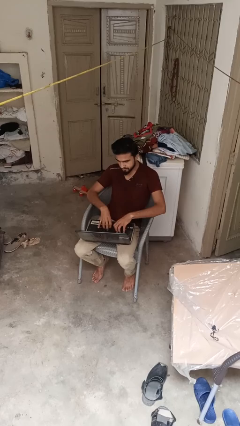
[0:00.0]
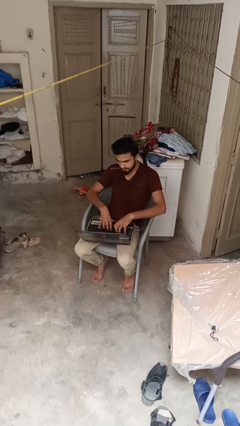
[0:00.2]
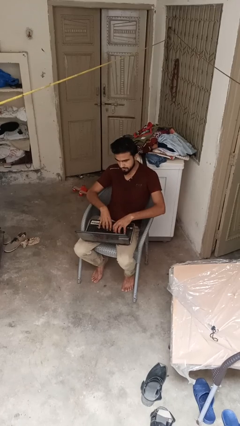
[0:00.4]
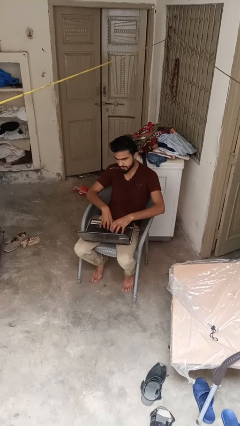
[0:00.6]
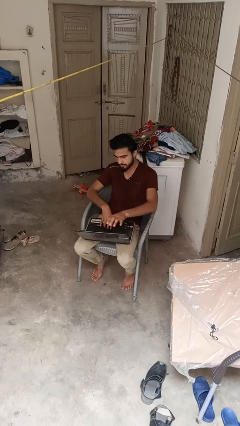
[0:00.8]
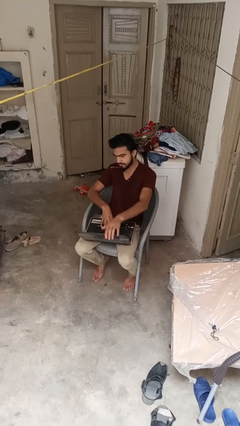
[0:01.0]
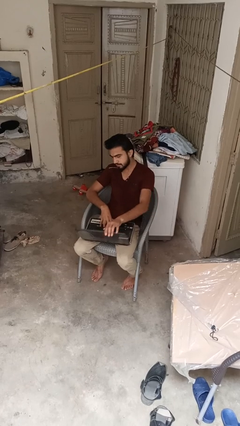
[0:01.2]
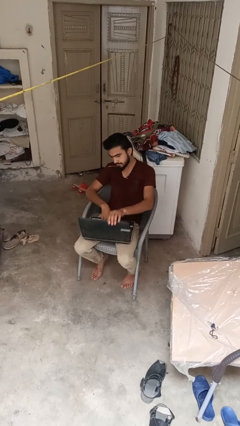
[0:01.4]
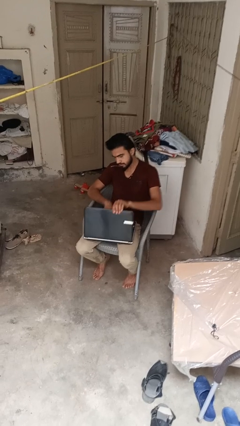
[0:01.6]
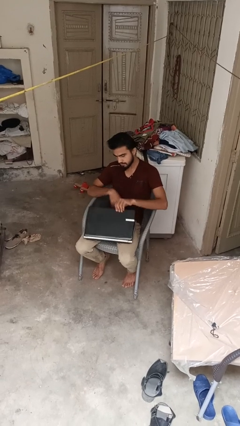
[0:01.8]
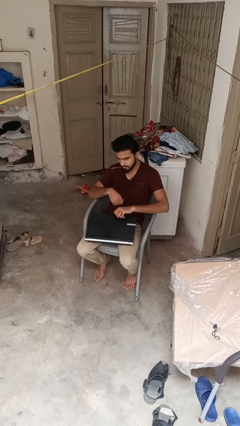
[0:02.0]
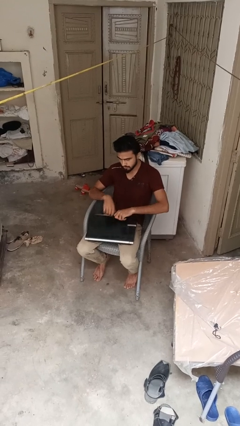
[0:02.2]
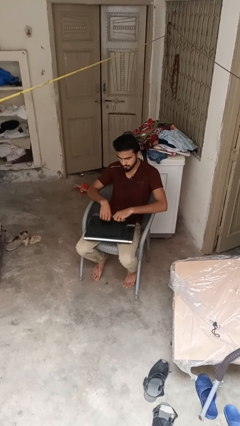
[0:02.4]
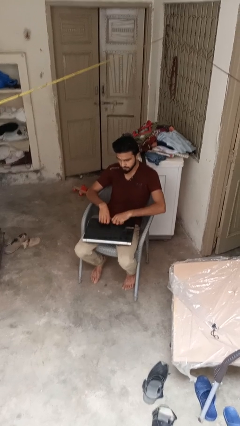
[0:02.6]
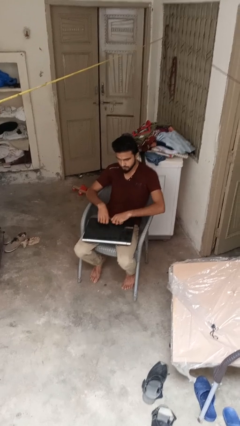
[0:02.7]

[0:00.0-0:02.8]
person closes laptop

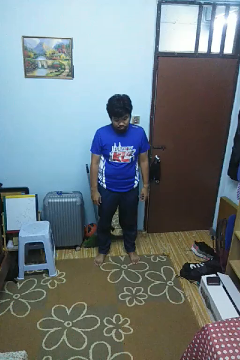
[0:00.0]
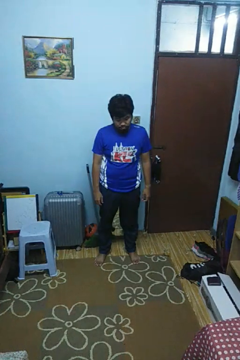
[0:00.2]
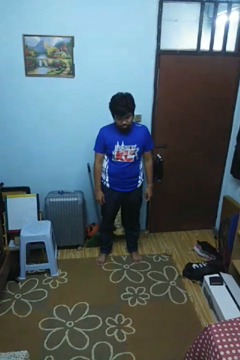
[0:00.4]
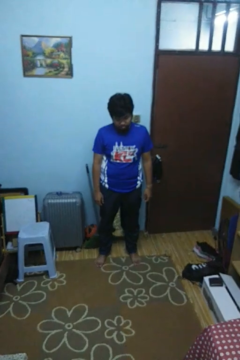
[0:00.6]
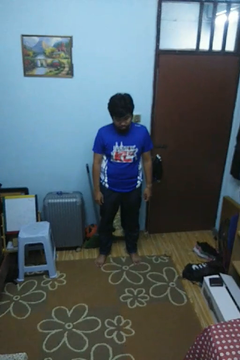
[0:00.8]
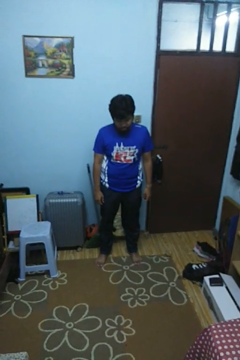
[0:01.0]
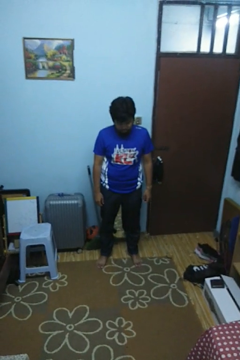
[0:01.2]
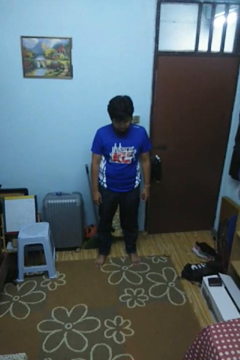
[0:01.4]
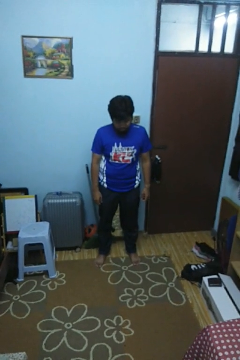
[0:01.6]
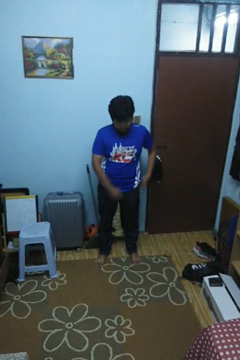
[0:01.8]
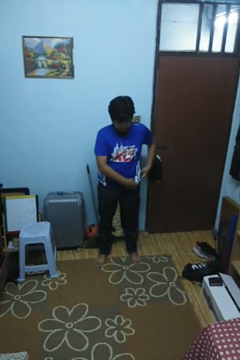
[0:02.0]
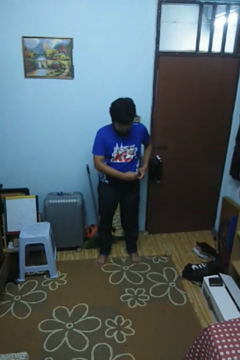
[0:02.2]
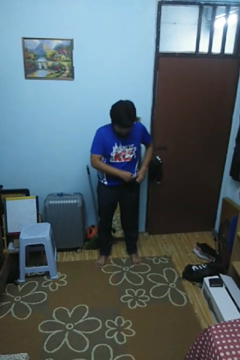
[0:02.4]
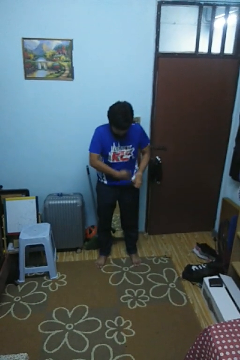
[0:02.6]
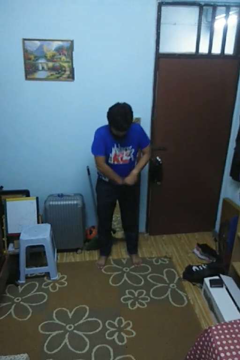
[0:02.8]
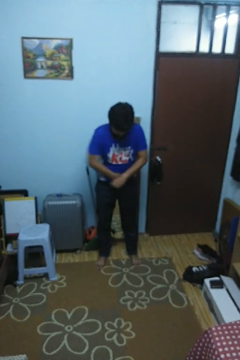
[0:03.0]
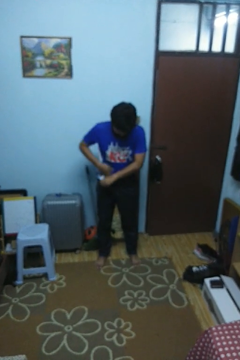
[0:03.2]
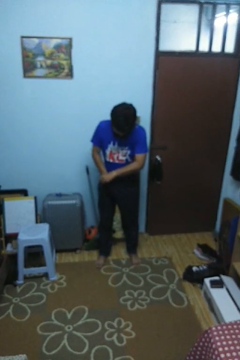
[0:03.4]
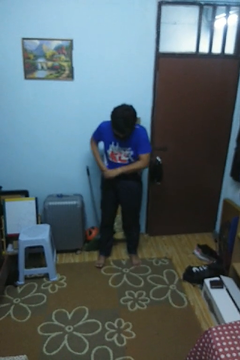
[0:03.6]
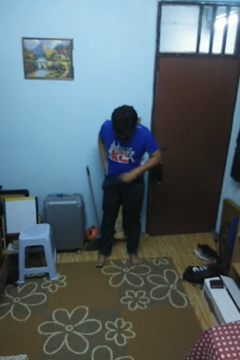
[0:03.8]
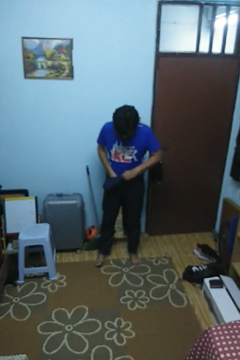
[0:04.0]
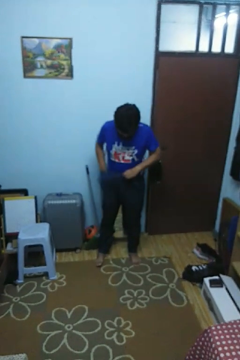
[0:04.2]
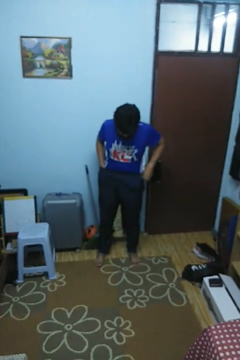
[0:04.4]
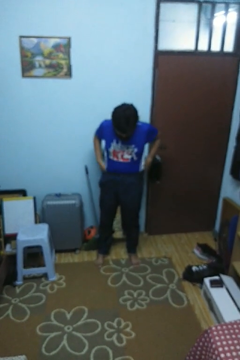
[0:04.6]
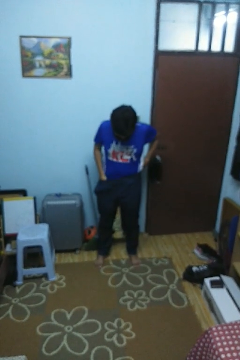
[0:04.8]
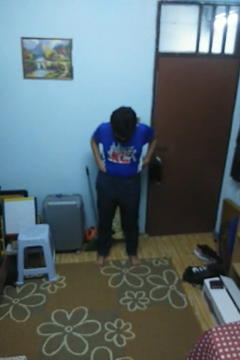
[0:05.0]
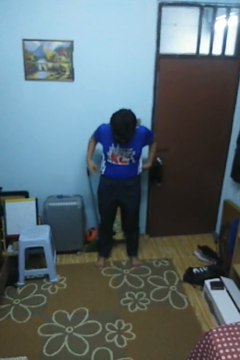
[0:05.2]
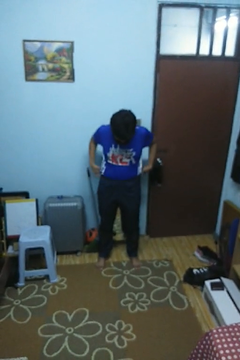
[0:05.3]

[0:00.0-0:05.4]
person tucks in shirt

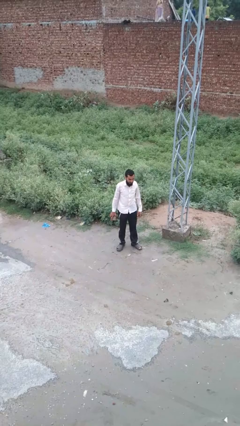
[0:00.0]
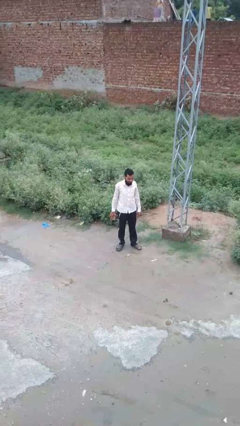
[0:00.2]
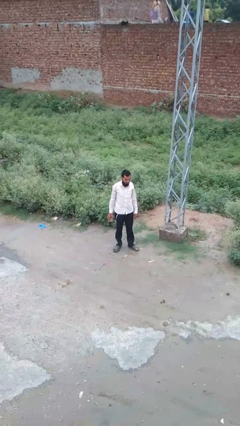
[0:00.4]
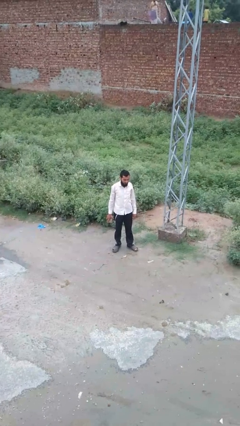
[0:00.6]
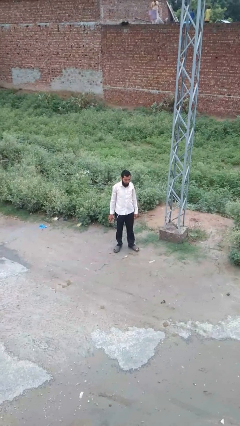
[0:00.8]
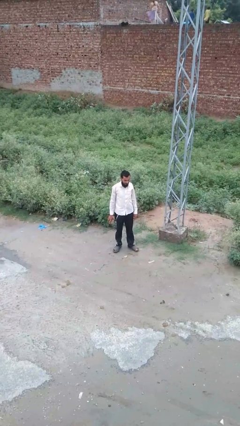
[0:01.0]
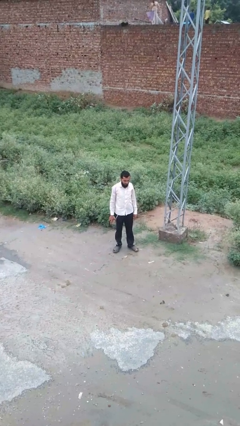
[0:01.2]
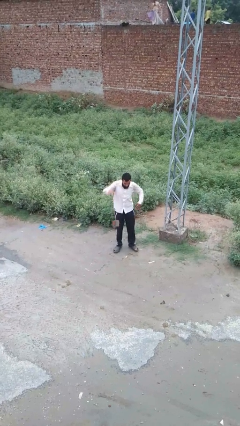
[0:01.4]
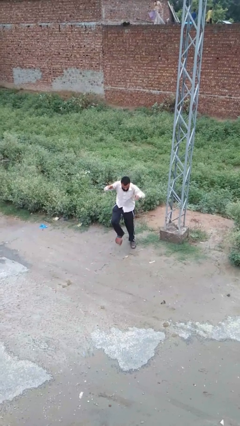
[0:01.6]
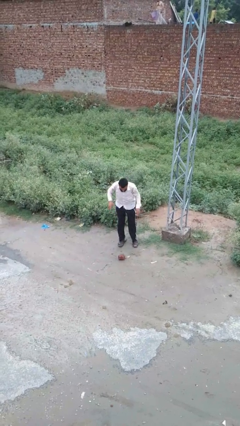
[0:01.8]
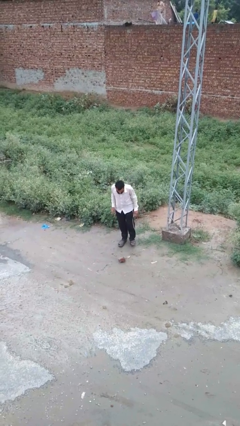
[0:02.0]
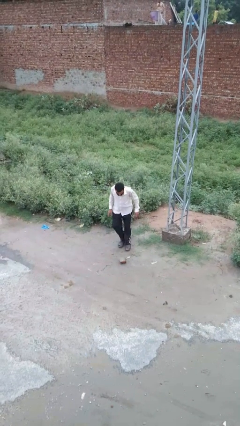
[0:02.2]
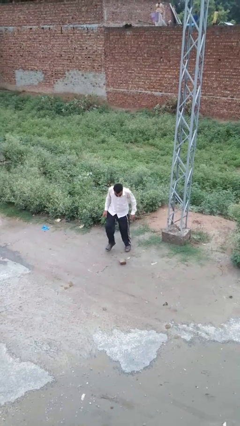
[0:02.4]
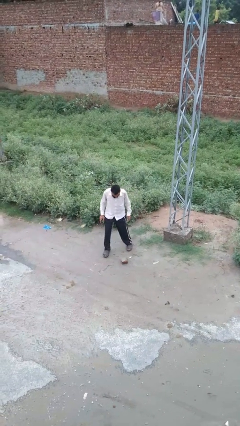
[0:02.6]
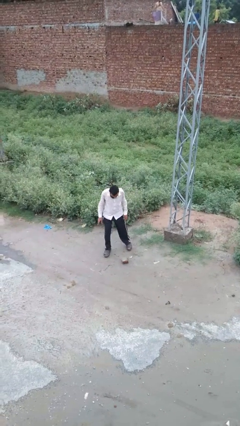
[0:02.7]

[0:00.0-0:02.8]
person drops object

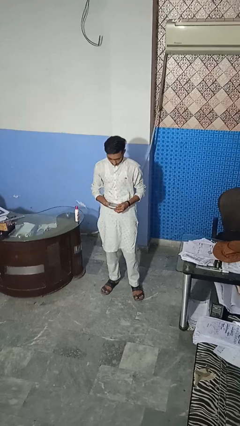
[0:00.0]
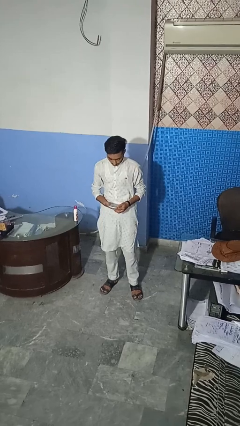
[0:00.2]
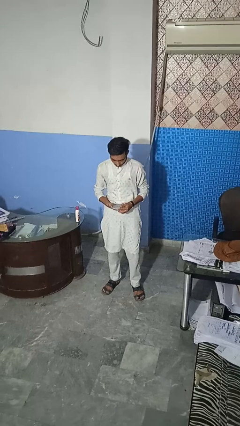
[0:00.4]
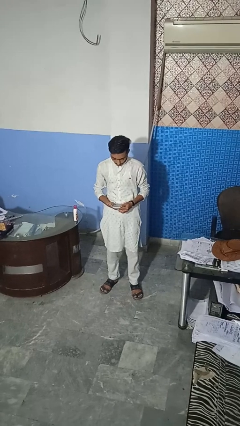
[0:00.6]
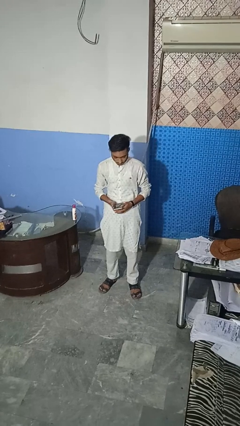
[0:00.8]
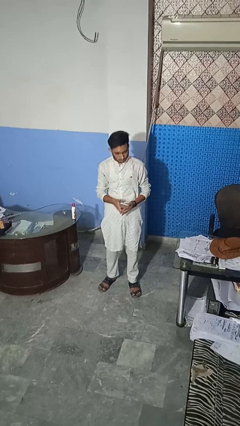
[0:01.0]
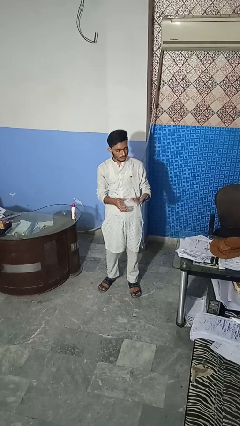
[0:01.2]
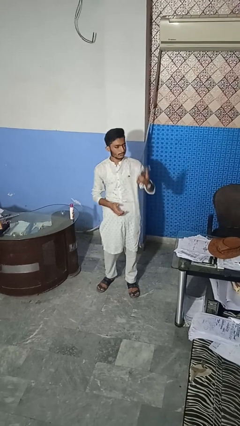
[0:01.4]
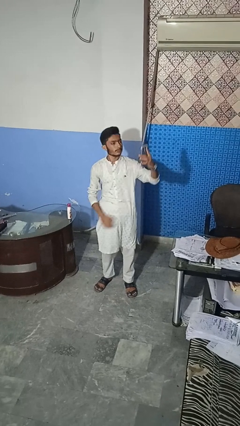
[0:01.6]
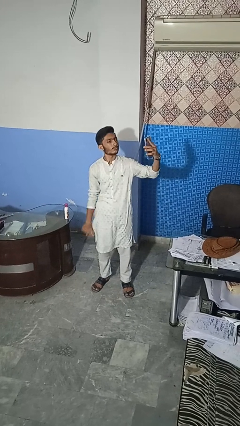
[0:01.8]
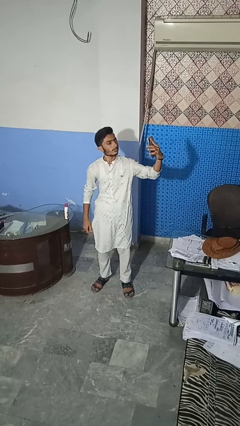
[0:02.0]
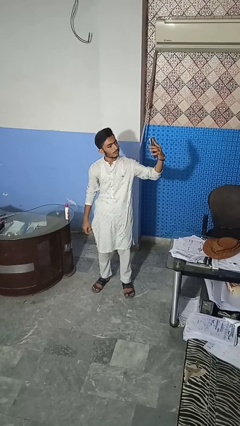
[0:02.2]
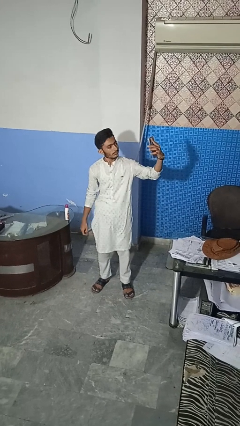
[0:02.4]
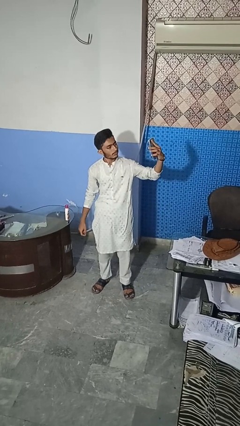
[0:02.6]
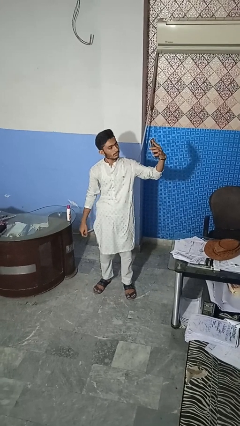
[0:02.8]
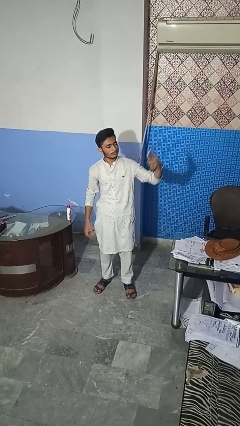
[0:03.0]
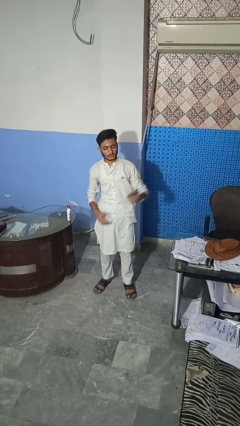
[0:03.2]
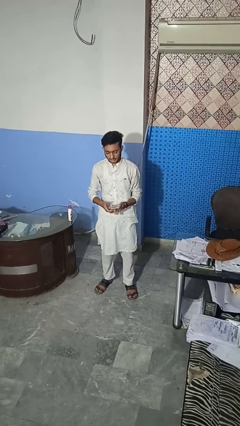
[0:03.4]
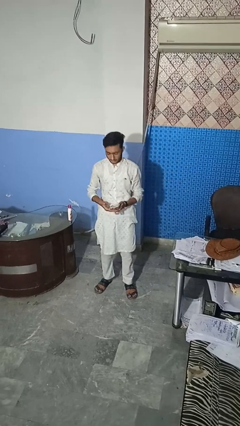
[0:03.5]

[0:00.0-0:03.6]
person takes selfie

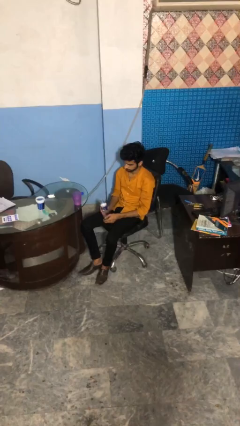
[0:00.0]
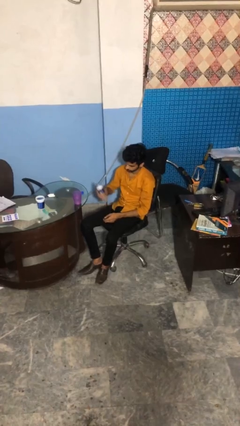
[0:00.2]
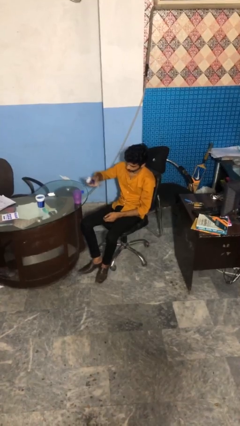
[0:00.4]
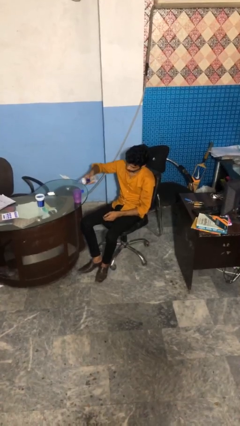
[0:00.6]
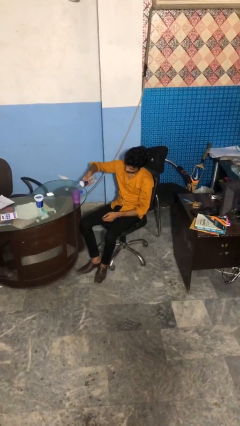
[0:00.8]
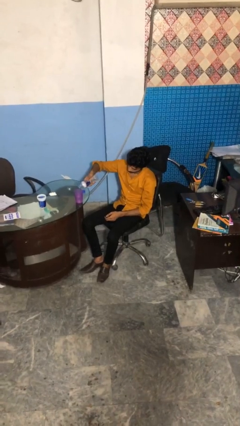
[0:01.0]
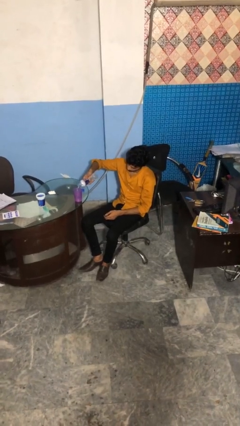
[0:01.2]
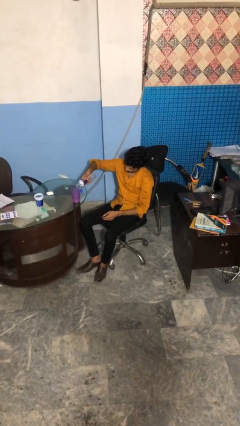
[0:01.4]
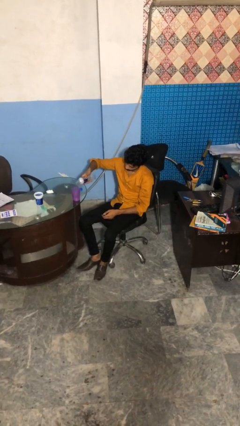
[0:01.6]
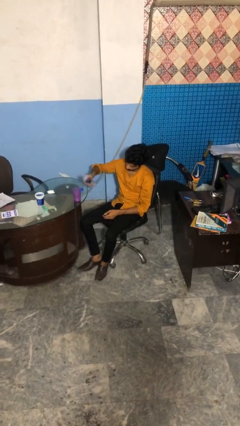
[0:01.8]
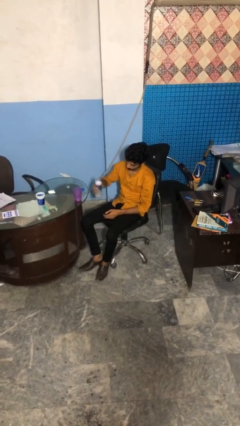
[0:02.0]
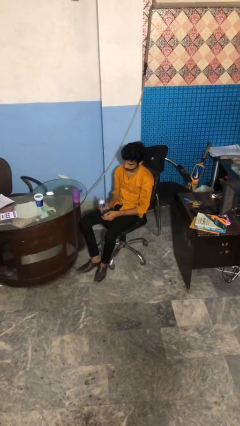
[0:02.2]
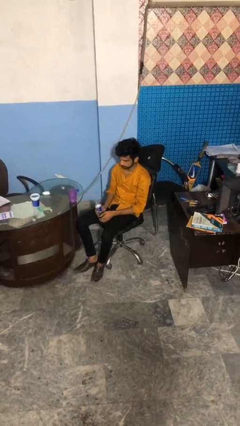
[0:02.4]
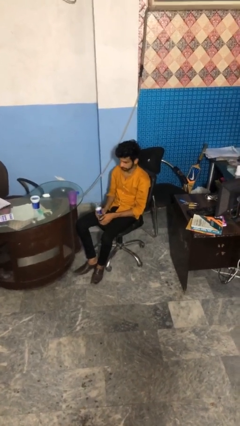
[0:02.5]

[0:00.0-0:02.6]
person pours liquid into cup

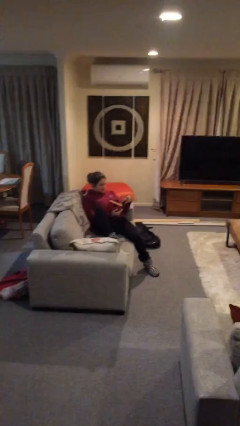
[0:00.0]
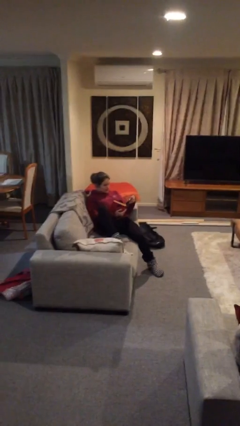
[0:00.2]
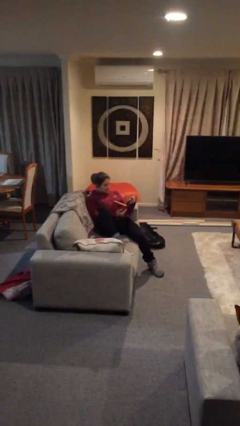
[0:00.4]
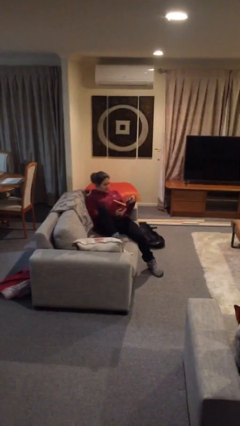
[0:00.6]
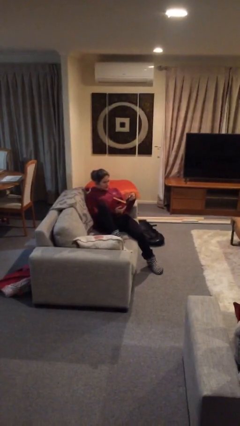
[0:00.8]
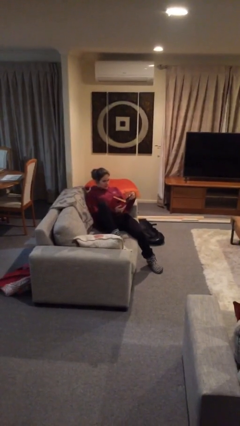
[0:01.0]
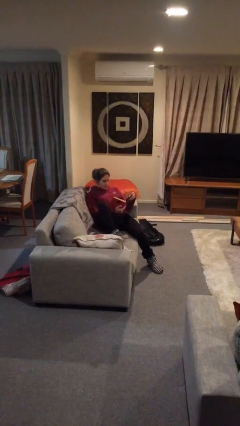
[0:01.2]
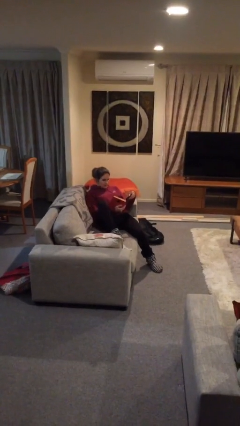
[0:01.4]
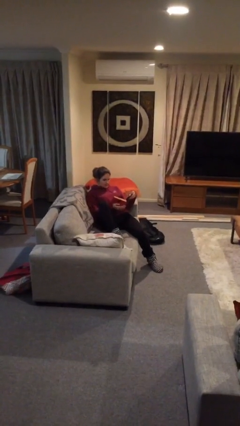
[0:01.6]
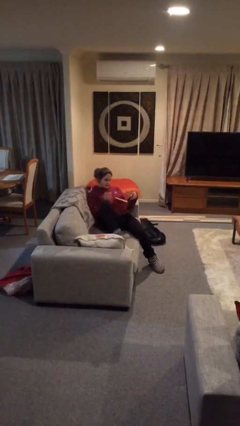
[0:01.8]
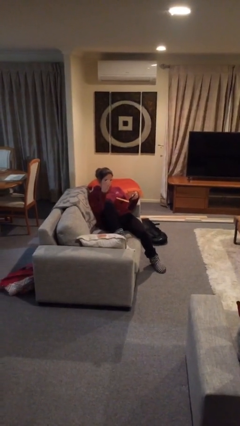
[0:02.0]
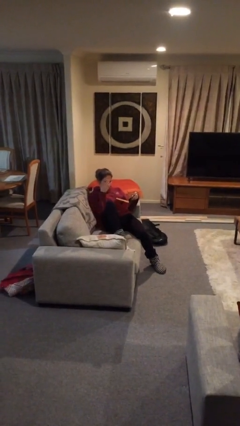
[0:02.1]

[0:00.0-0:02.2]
person reads document
